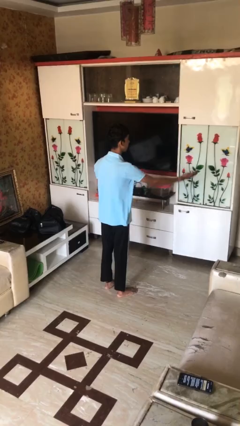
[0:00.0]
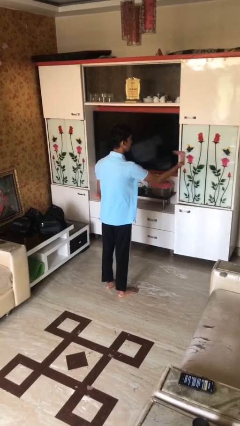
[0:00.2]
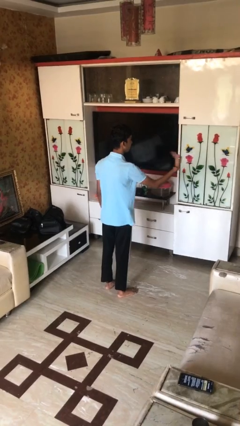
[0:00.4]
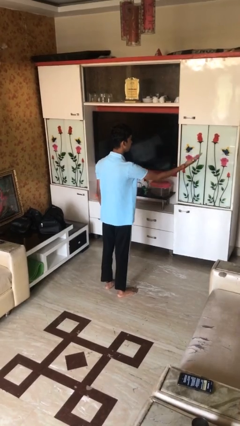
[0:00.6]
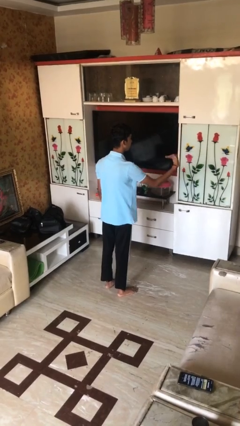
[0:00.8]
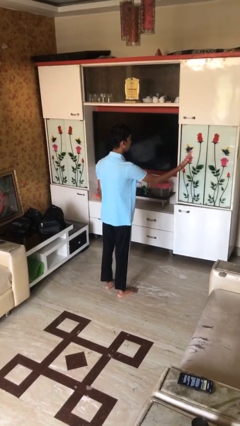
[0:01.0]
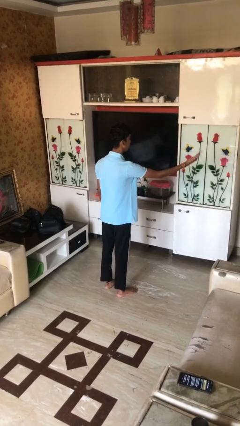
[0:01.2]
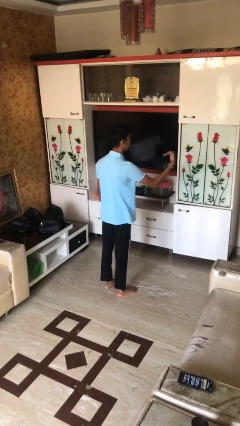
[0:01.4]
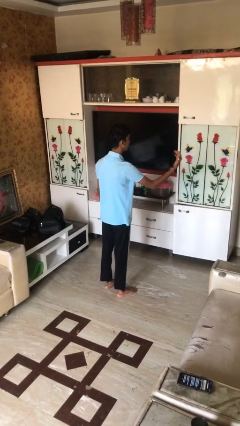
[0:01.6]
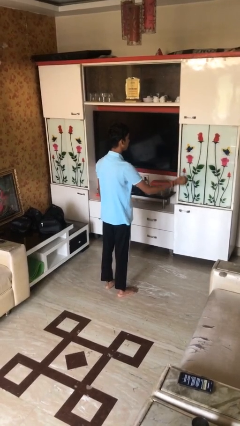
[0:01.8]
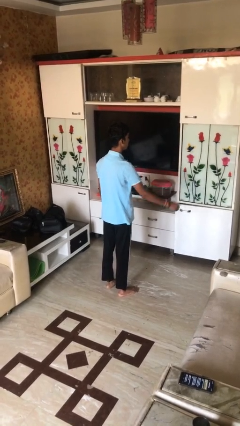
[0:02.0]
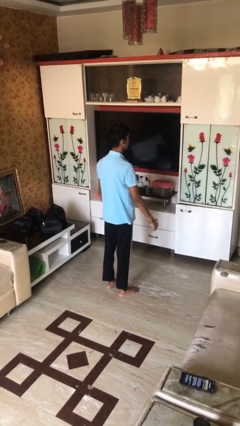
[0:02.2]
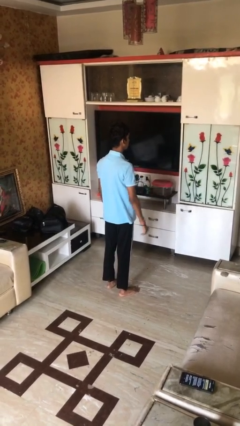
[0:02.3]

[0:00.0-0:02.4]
person gestures come here

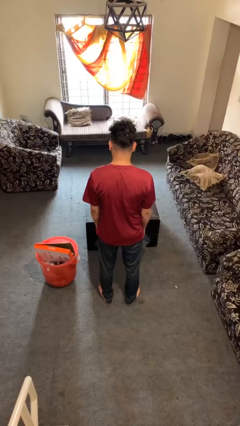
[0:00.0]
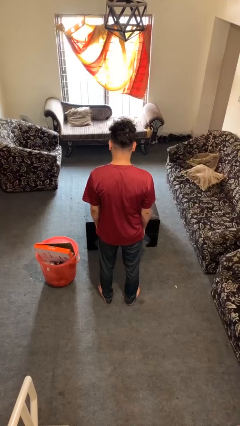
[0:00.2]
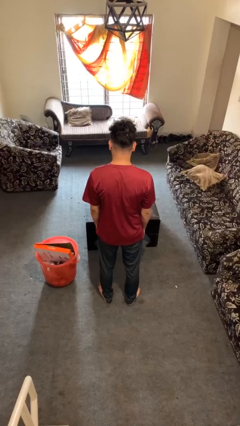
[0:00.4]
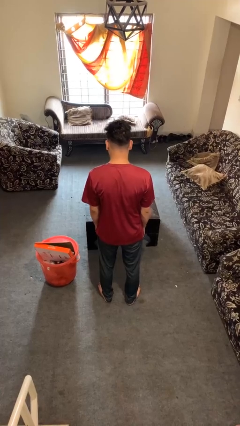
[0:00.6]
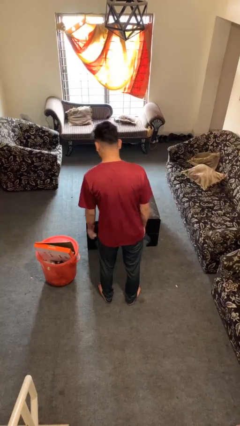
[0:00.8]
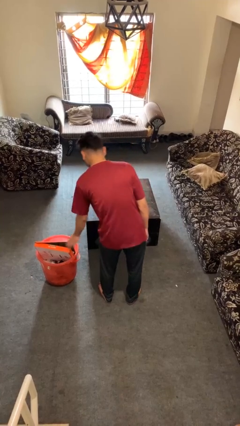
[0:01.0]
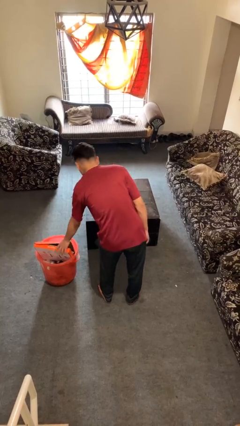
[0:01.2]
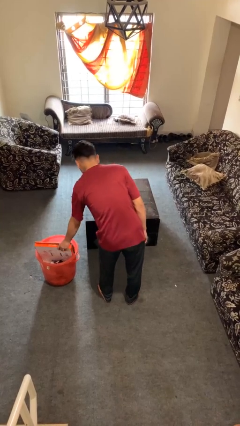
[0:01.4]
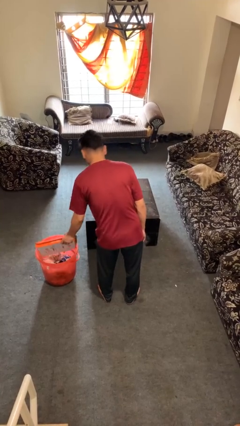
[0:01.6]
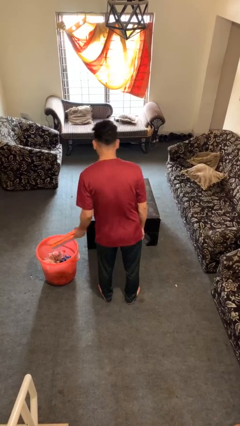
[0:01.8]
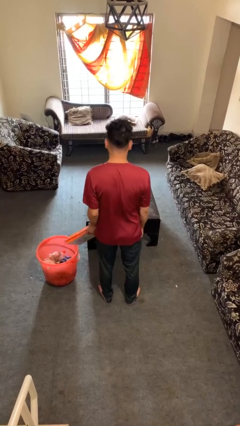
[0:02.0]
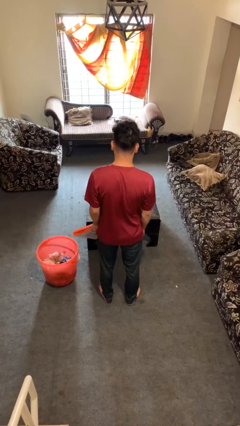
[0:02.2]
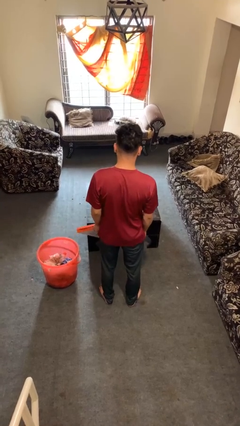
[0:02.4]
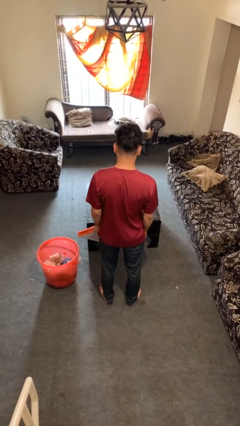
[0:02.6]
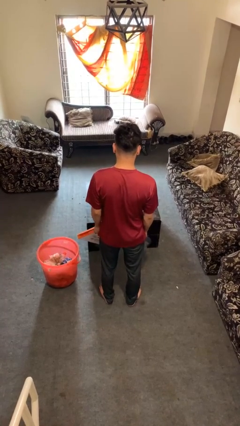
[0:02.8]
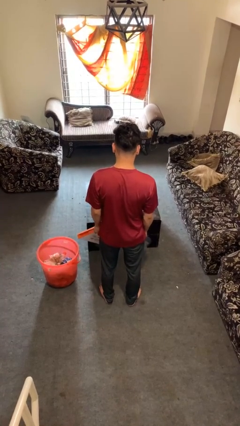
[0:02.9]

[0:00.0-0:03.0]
person takes object from basket

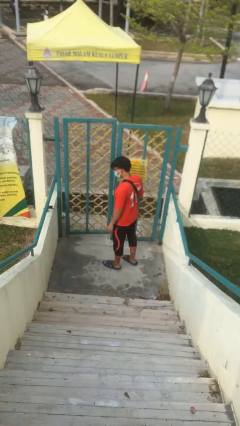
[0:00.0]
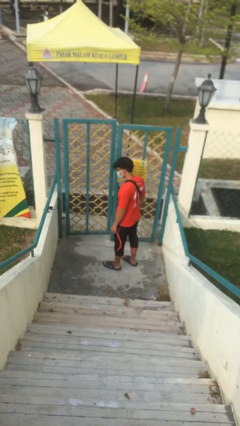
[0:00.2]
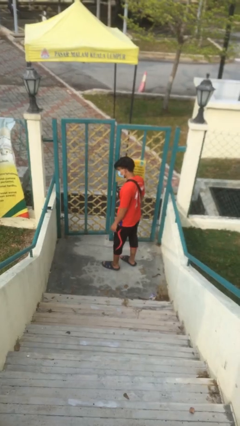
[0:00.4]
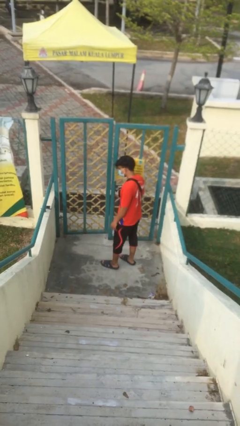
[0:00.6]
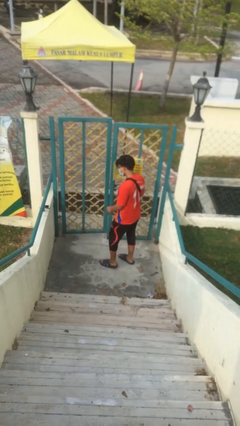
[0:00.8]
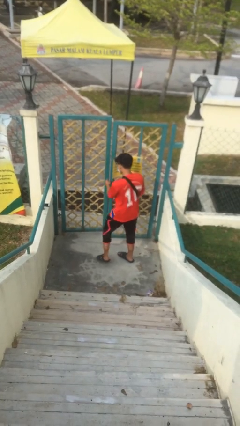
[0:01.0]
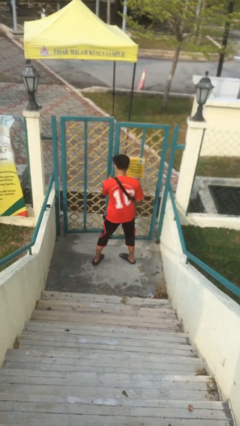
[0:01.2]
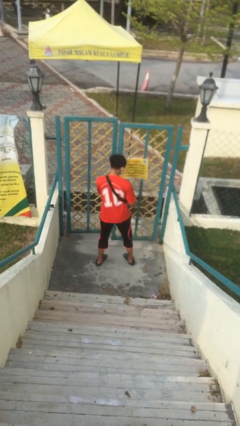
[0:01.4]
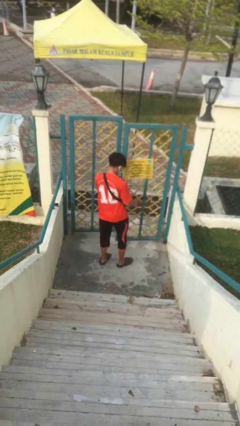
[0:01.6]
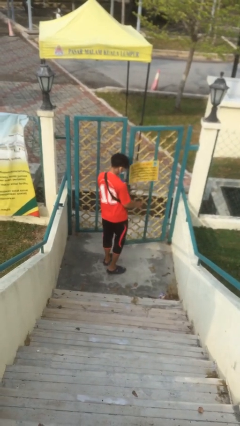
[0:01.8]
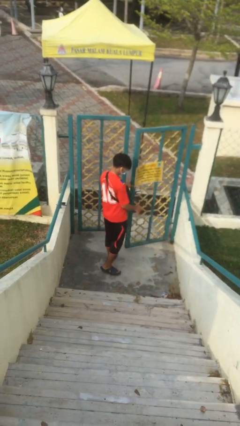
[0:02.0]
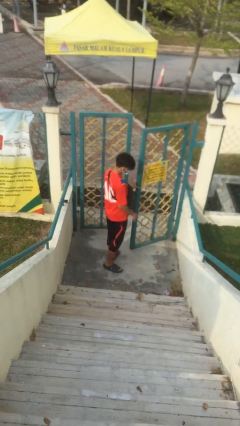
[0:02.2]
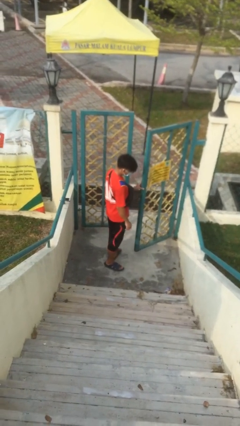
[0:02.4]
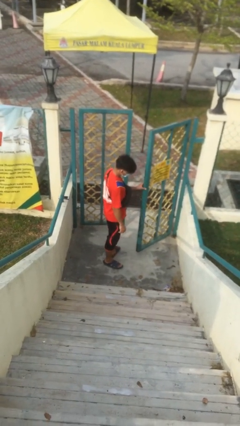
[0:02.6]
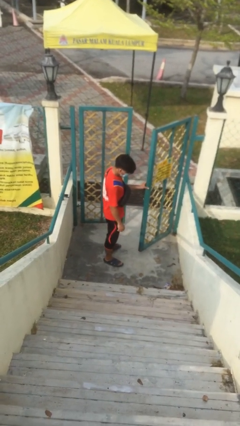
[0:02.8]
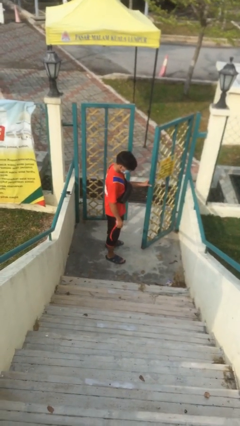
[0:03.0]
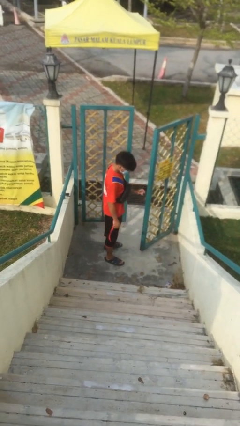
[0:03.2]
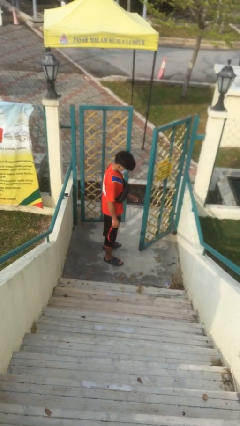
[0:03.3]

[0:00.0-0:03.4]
person opens facility door

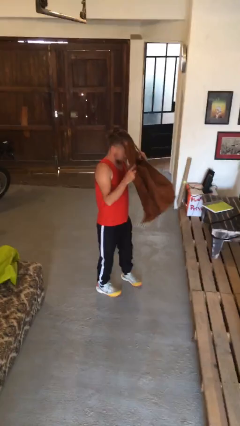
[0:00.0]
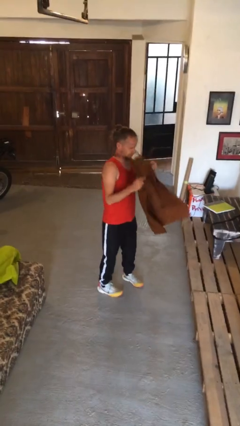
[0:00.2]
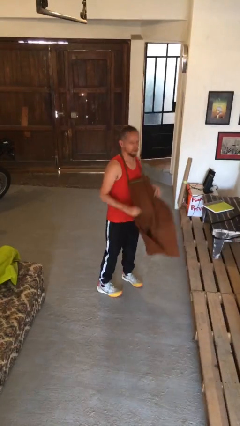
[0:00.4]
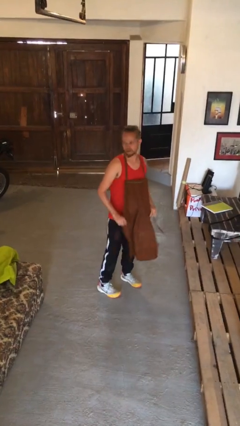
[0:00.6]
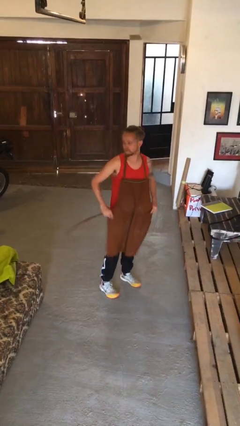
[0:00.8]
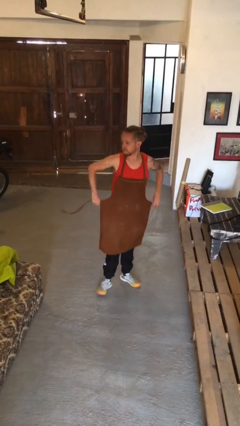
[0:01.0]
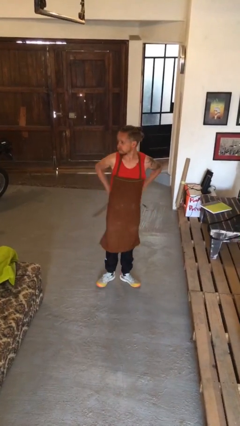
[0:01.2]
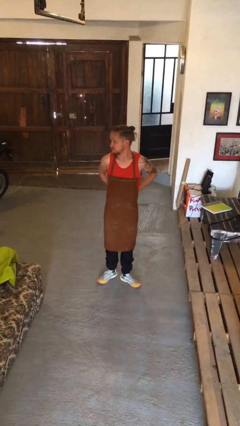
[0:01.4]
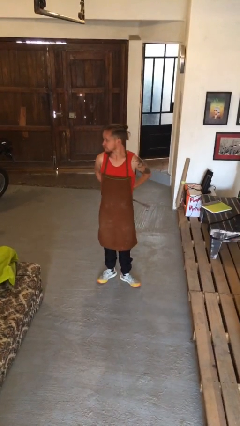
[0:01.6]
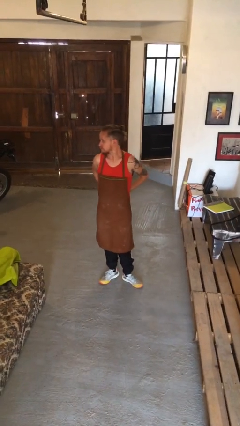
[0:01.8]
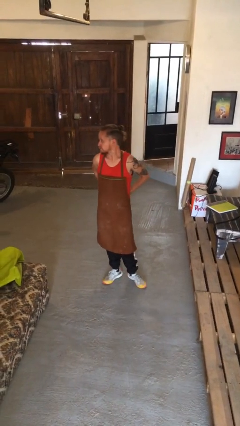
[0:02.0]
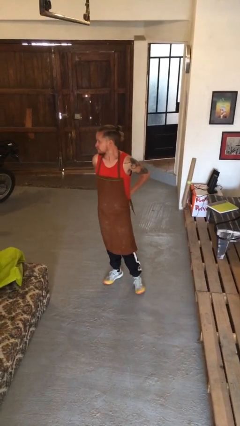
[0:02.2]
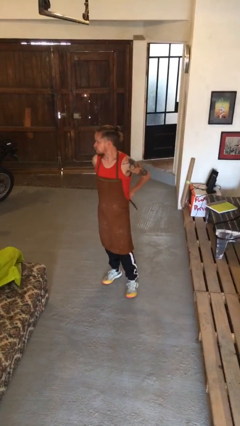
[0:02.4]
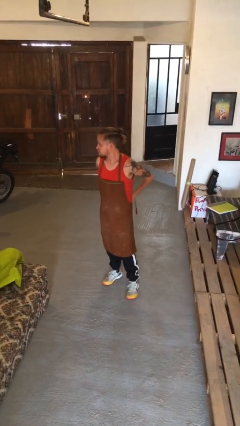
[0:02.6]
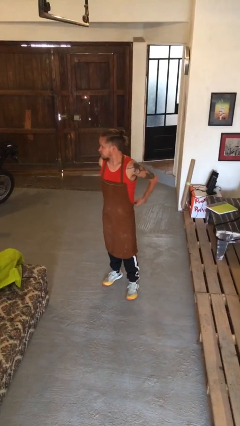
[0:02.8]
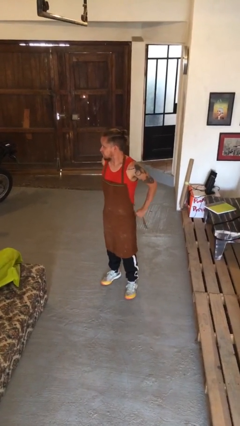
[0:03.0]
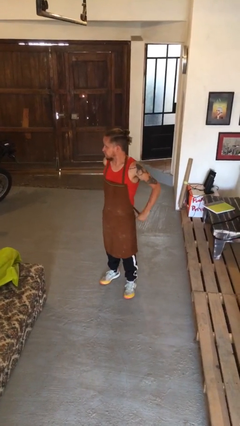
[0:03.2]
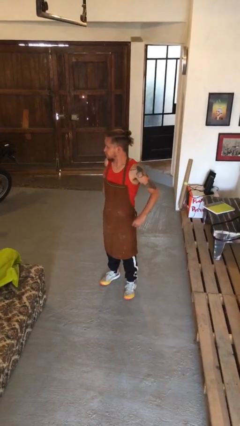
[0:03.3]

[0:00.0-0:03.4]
person puts on apron

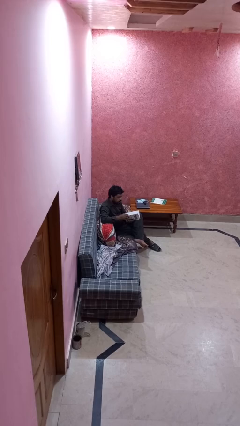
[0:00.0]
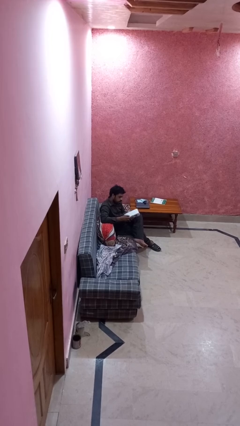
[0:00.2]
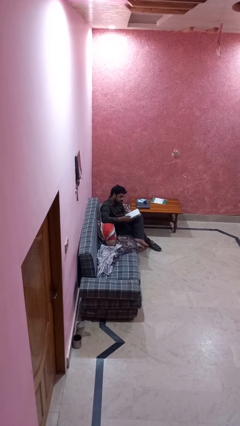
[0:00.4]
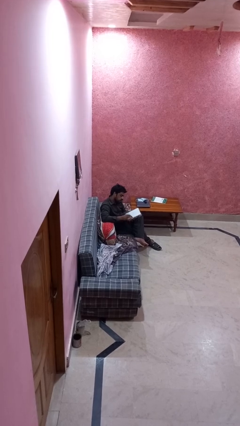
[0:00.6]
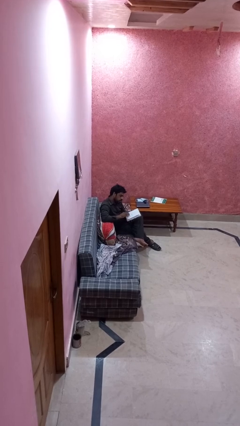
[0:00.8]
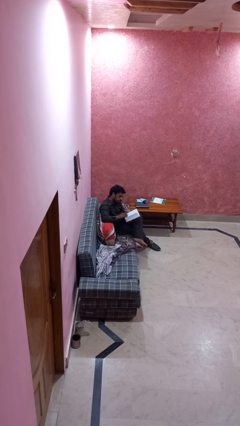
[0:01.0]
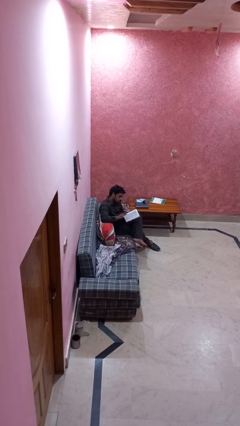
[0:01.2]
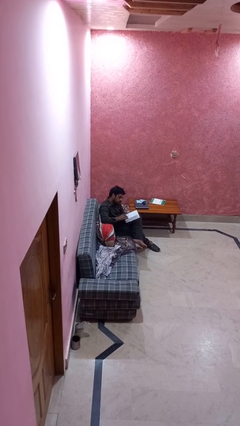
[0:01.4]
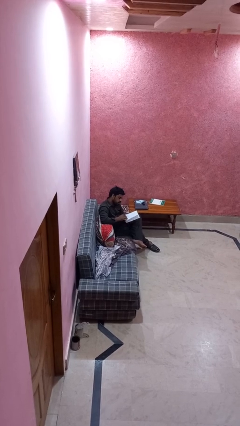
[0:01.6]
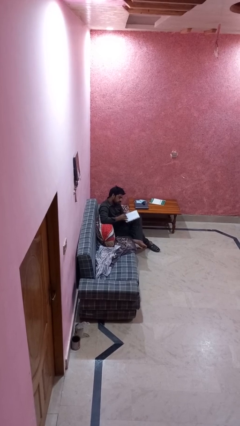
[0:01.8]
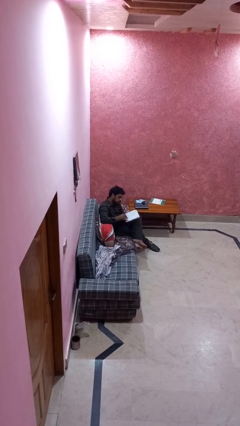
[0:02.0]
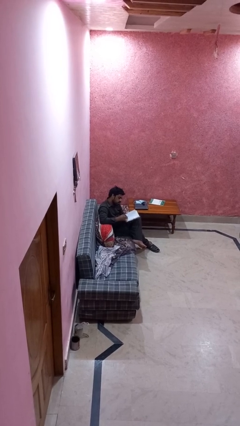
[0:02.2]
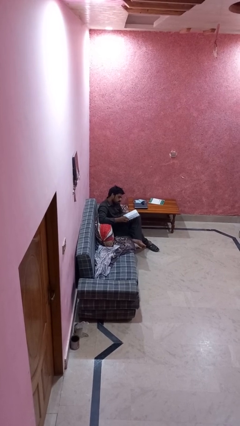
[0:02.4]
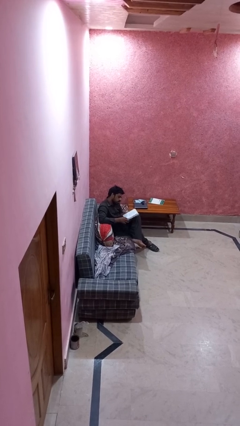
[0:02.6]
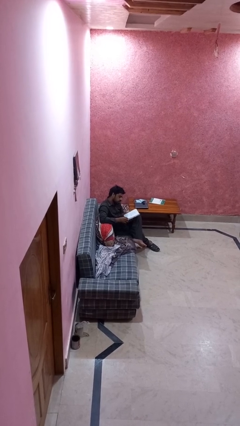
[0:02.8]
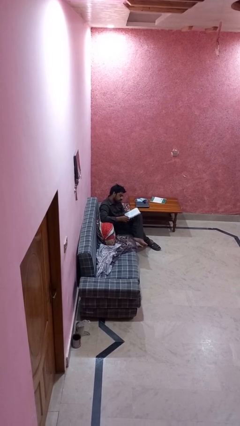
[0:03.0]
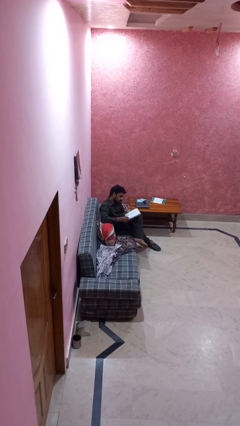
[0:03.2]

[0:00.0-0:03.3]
person reads book

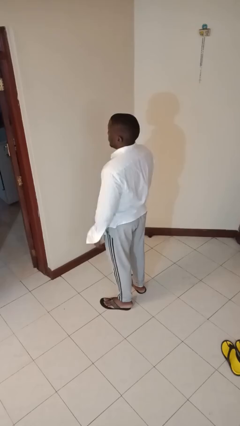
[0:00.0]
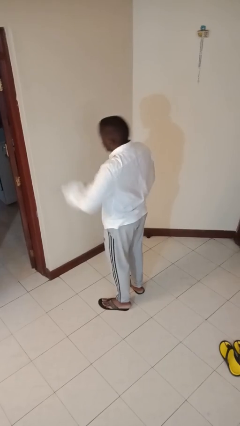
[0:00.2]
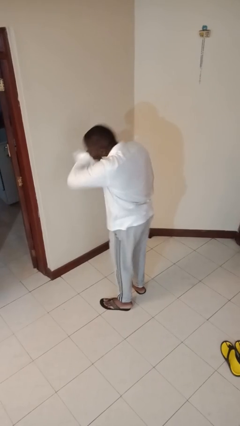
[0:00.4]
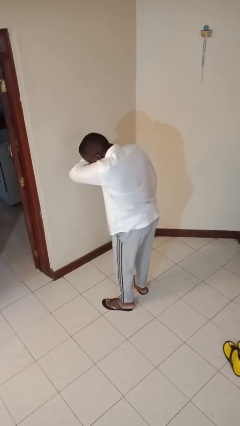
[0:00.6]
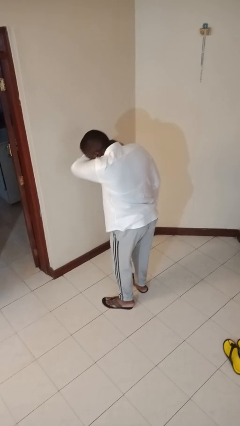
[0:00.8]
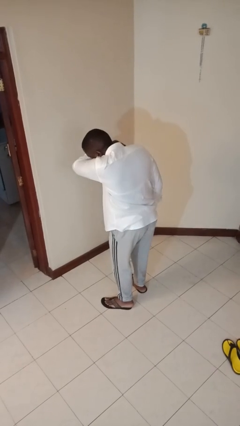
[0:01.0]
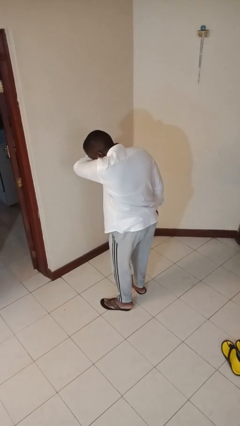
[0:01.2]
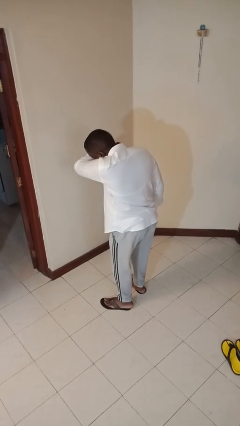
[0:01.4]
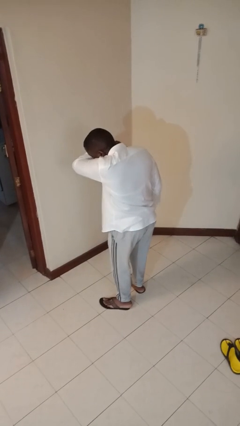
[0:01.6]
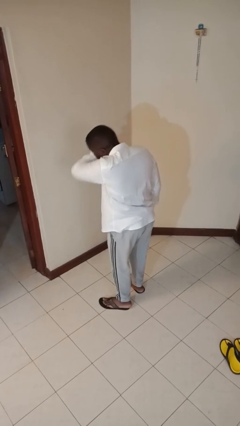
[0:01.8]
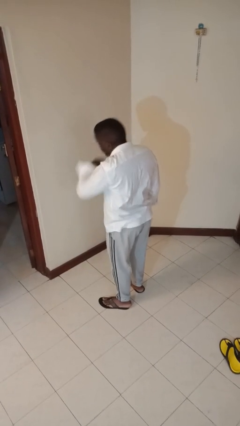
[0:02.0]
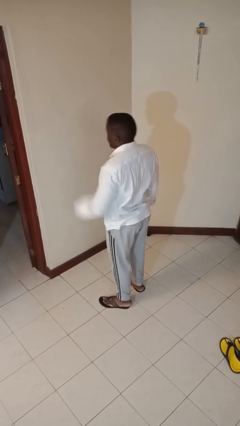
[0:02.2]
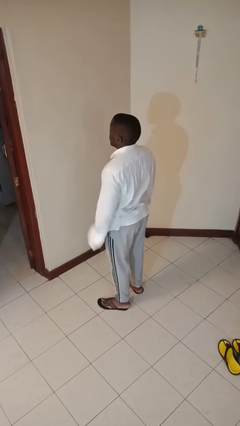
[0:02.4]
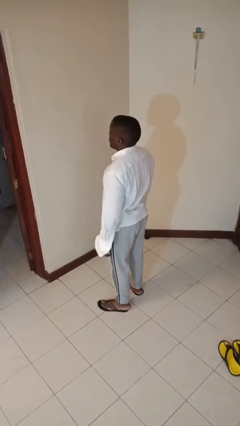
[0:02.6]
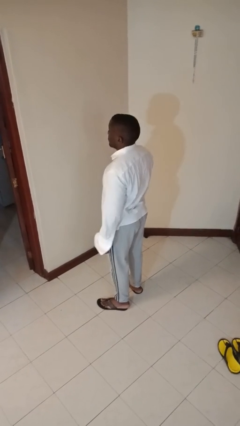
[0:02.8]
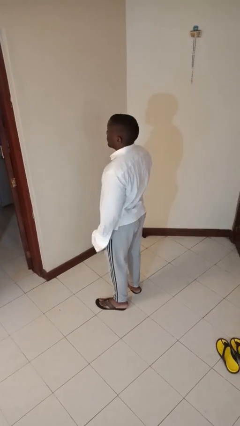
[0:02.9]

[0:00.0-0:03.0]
person sneezes into arm
